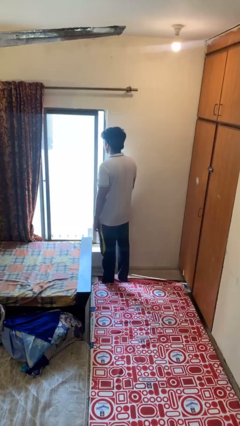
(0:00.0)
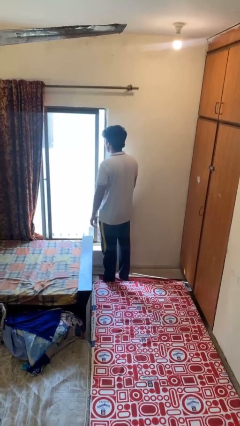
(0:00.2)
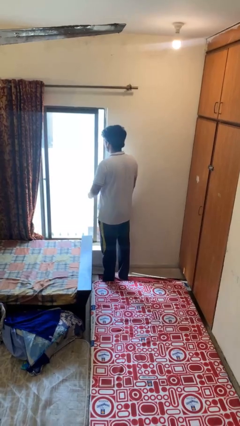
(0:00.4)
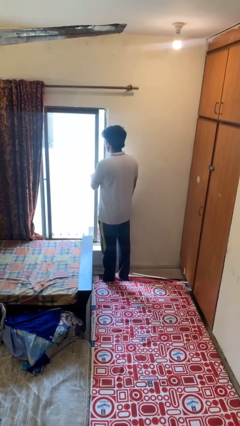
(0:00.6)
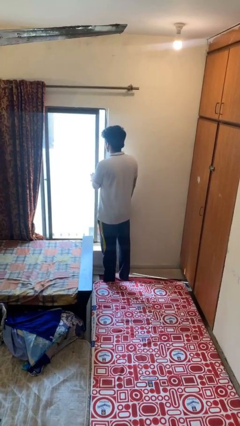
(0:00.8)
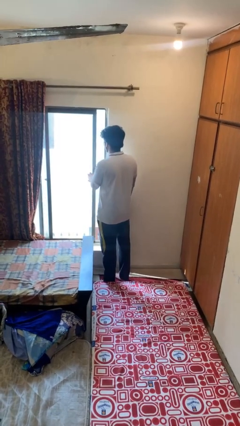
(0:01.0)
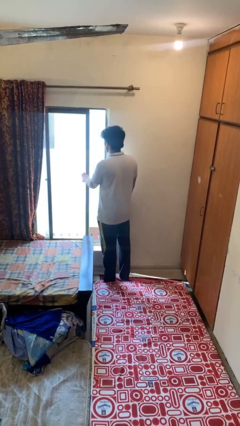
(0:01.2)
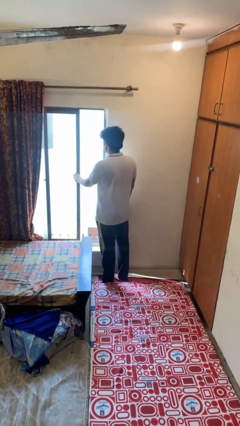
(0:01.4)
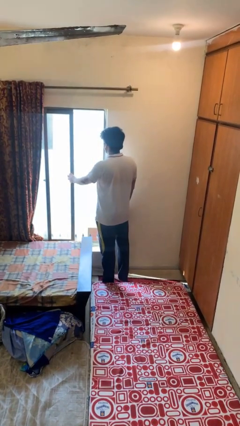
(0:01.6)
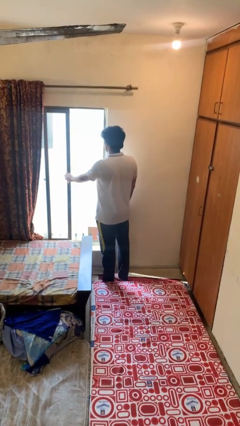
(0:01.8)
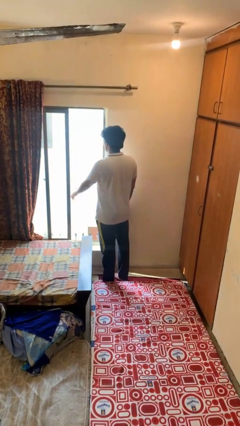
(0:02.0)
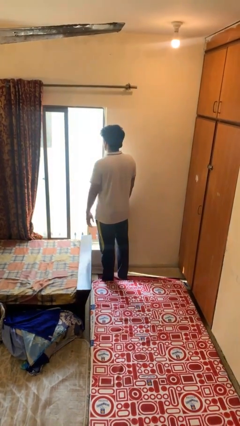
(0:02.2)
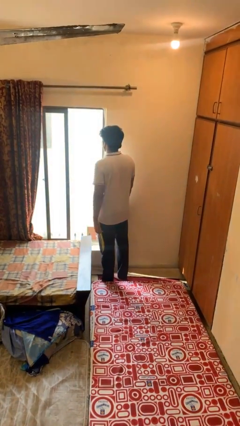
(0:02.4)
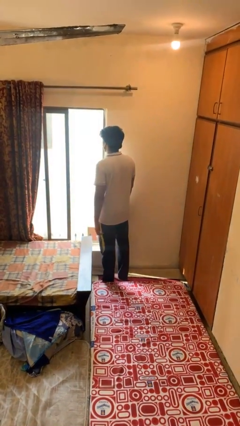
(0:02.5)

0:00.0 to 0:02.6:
person opens home window

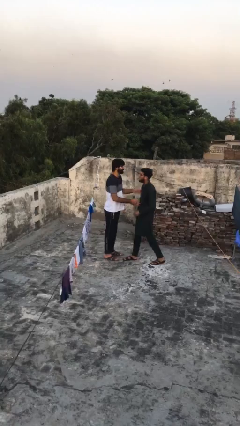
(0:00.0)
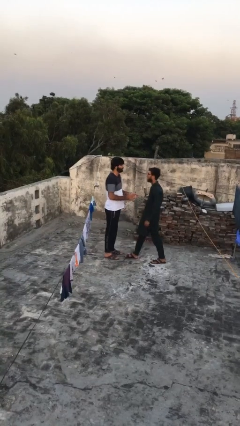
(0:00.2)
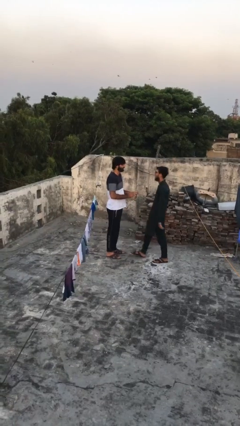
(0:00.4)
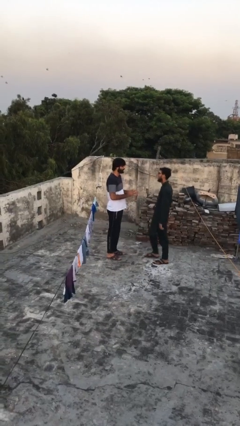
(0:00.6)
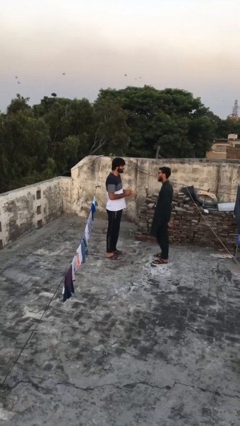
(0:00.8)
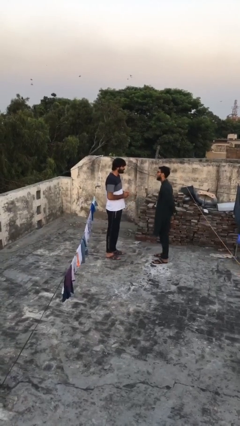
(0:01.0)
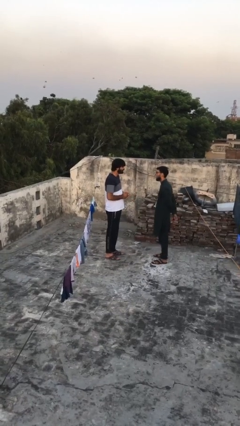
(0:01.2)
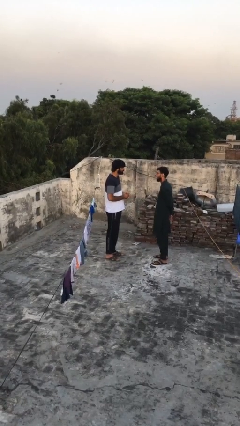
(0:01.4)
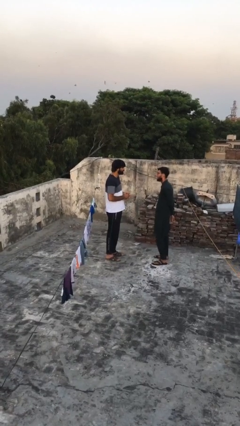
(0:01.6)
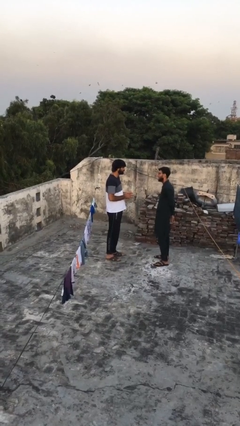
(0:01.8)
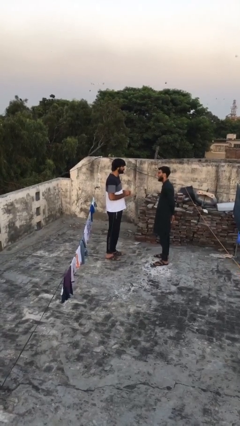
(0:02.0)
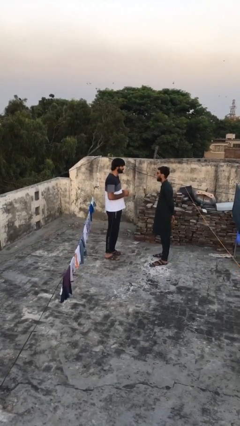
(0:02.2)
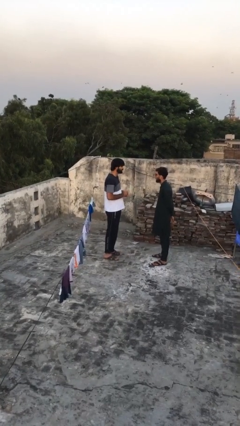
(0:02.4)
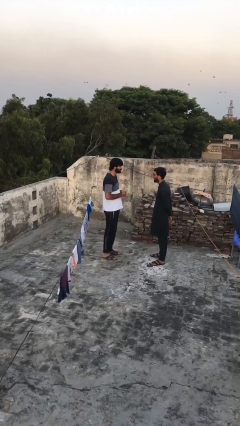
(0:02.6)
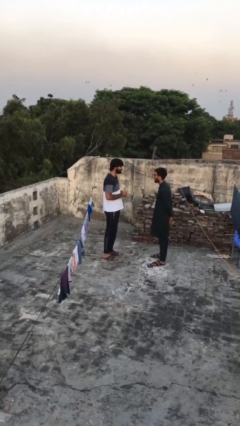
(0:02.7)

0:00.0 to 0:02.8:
person talks to person

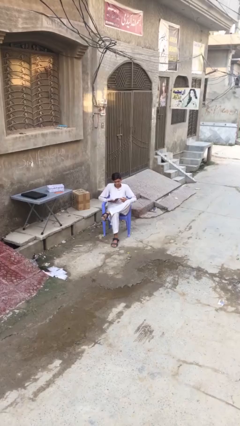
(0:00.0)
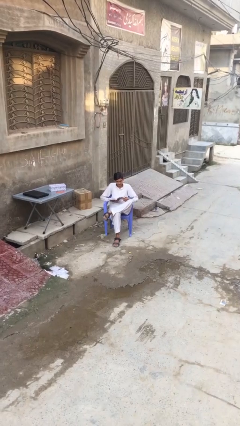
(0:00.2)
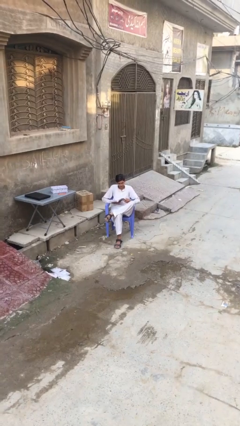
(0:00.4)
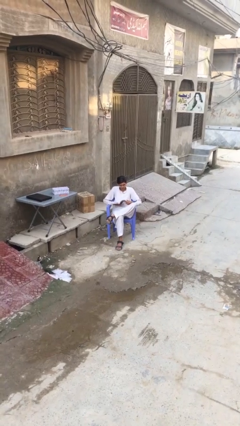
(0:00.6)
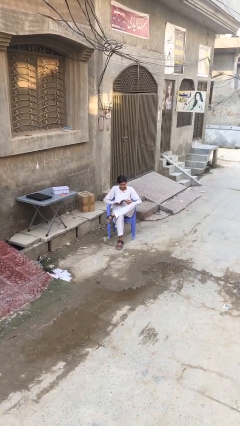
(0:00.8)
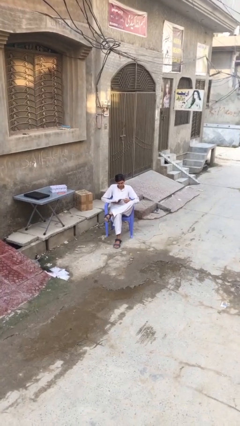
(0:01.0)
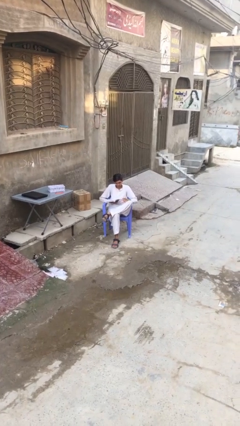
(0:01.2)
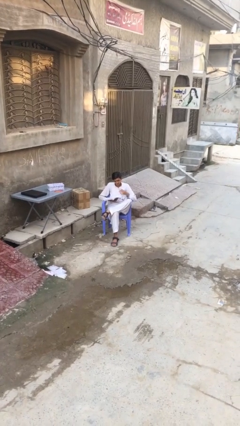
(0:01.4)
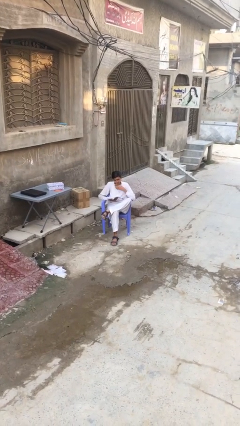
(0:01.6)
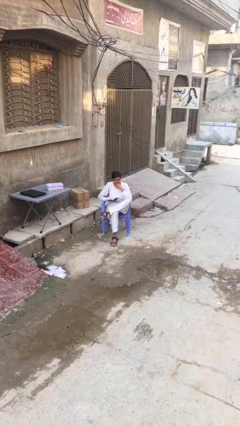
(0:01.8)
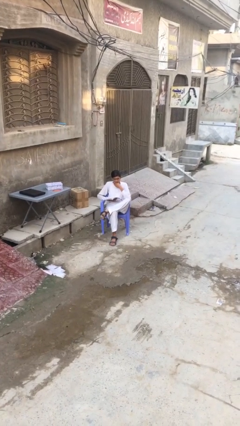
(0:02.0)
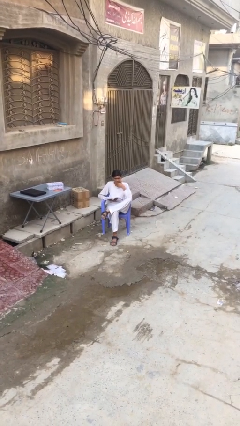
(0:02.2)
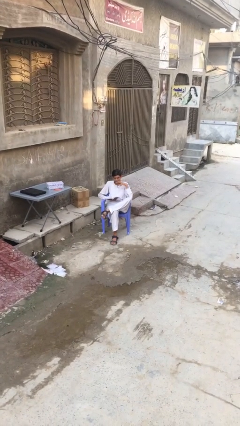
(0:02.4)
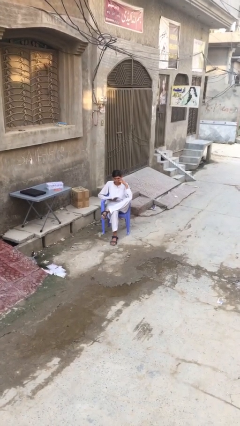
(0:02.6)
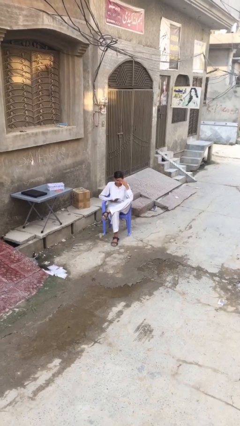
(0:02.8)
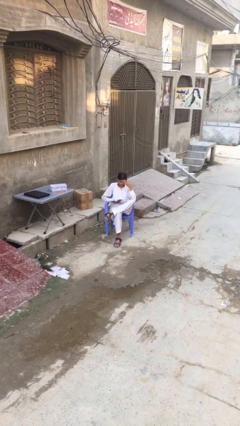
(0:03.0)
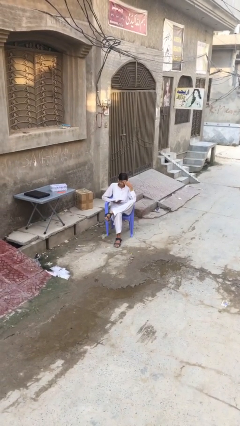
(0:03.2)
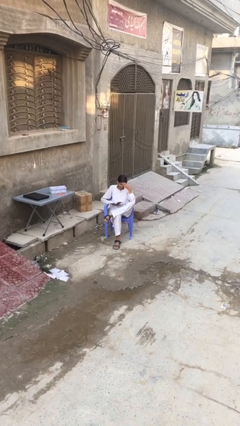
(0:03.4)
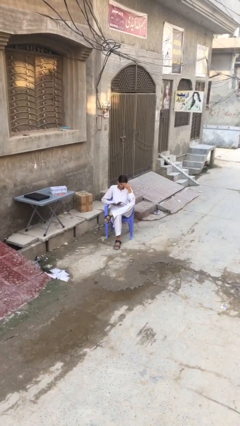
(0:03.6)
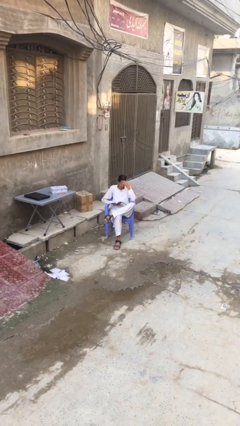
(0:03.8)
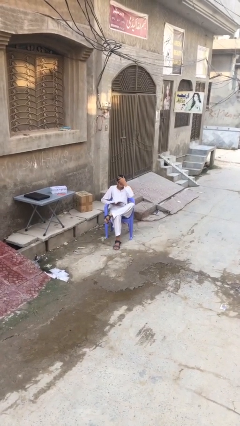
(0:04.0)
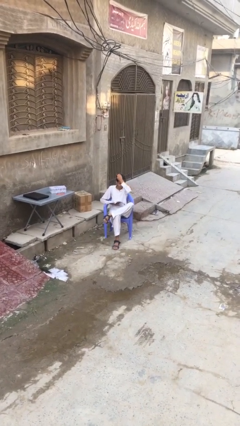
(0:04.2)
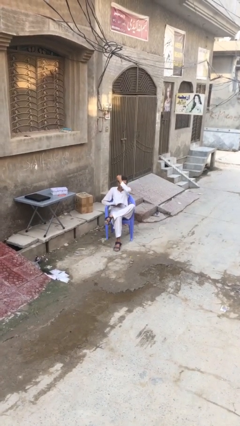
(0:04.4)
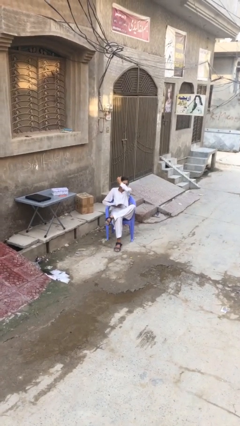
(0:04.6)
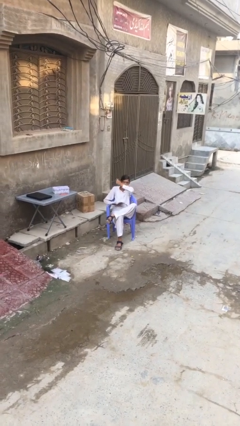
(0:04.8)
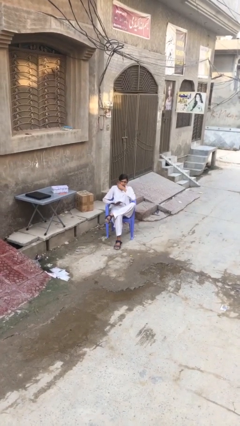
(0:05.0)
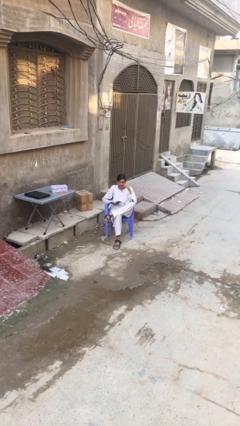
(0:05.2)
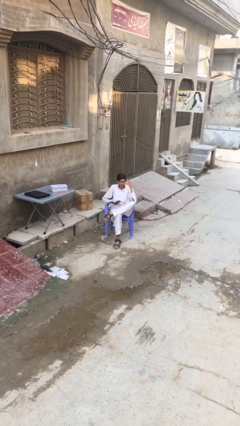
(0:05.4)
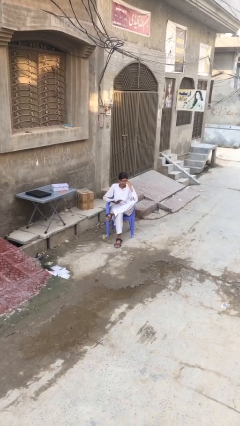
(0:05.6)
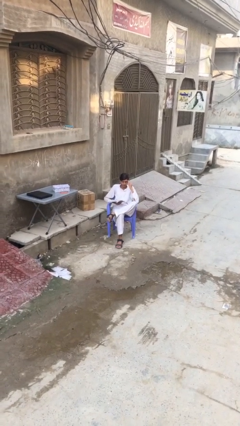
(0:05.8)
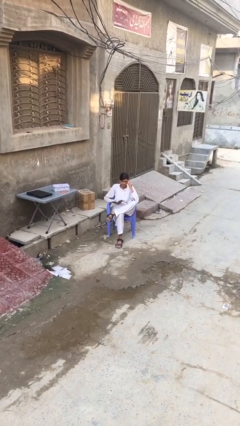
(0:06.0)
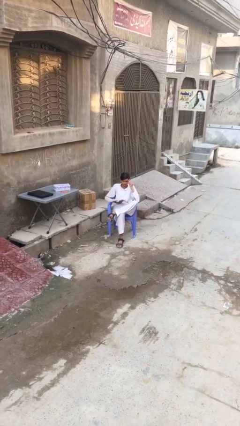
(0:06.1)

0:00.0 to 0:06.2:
person reads document

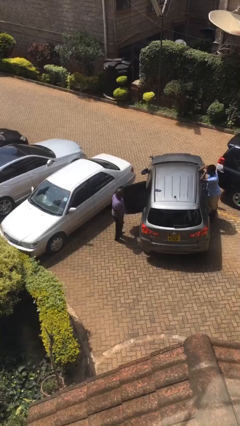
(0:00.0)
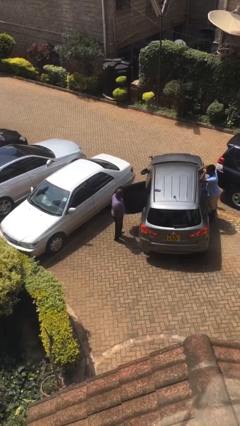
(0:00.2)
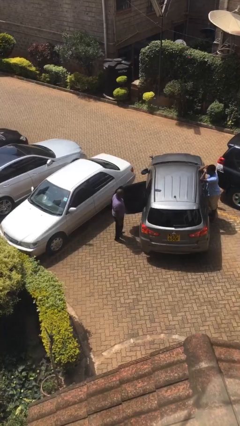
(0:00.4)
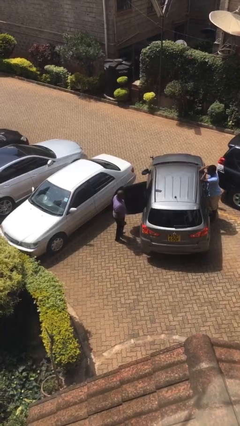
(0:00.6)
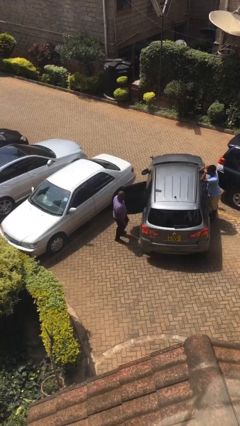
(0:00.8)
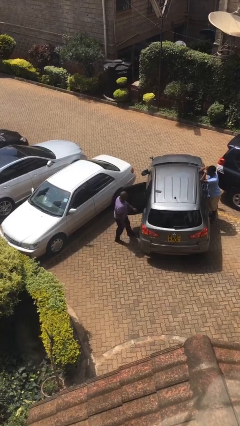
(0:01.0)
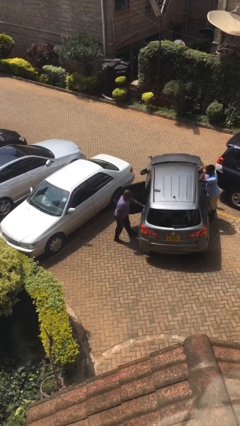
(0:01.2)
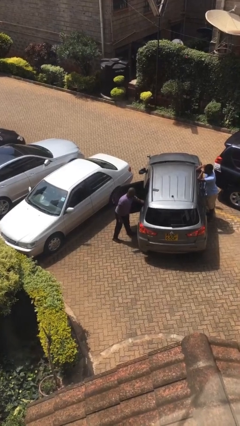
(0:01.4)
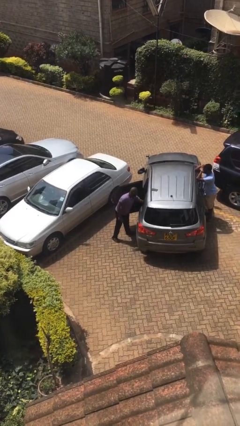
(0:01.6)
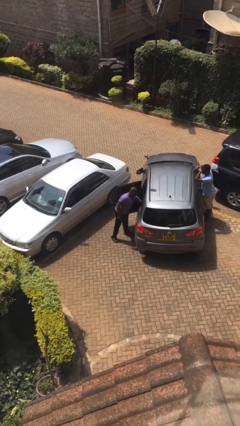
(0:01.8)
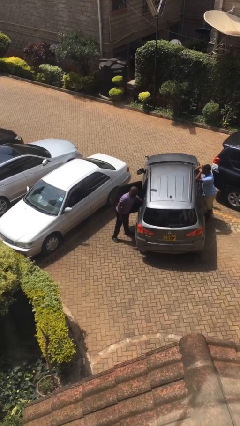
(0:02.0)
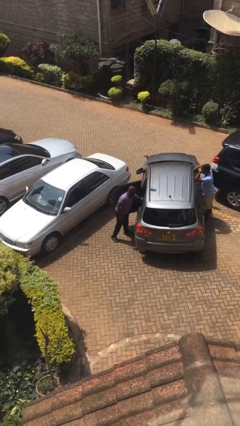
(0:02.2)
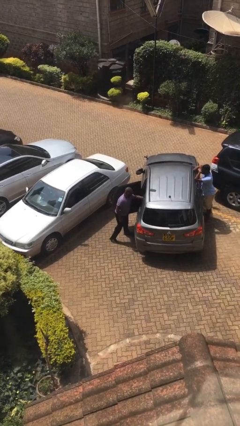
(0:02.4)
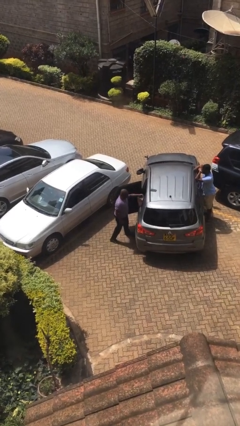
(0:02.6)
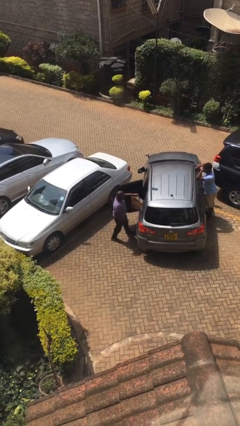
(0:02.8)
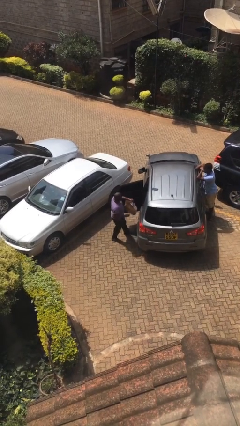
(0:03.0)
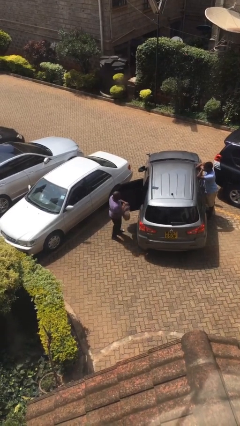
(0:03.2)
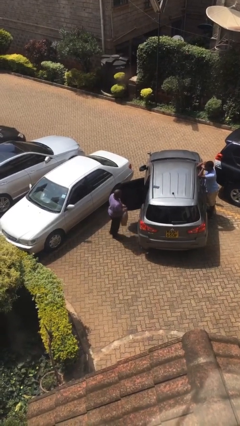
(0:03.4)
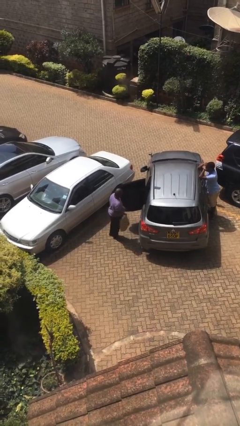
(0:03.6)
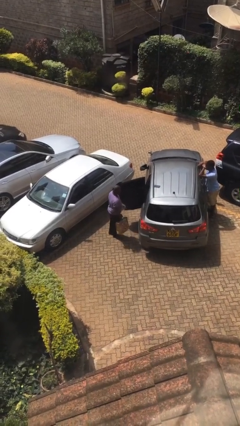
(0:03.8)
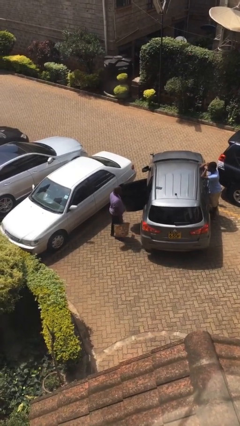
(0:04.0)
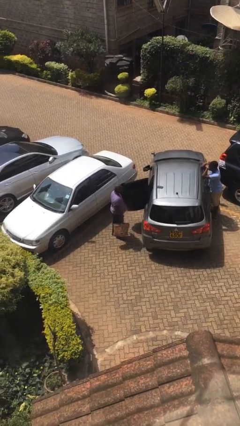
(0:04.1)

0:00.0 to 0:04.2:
person unloads car

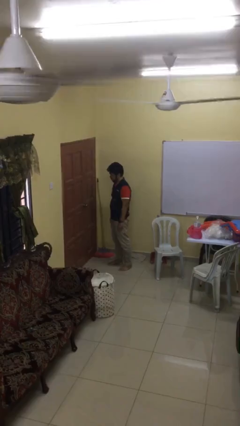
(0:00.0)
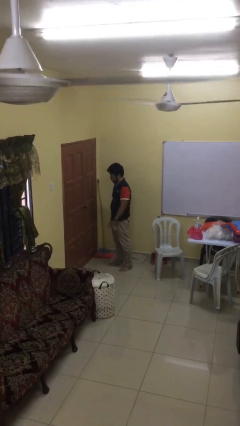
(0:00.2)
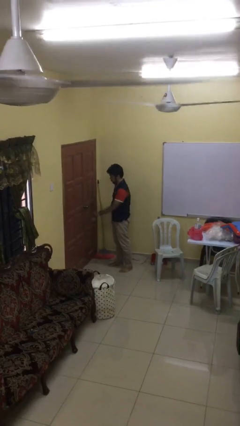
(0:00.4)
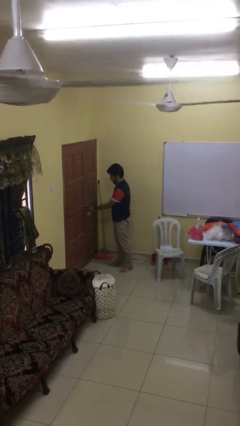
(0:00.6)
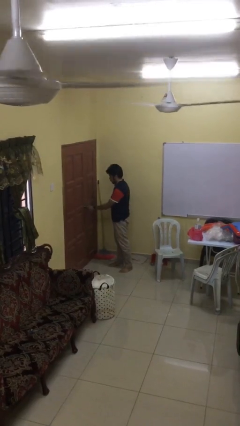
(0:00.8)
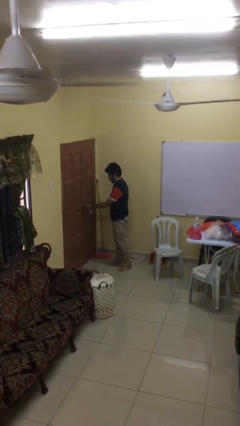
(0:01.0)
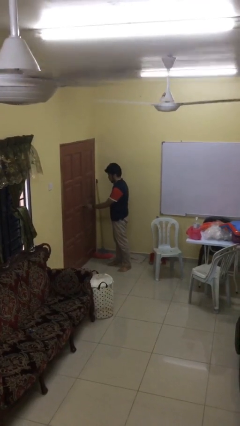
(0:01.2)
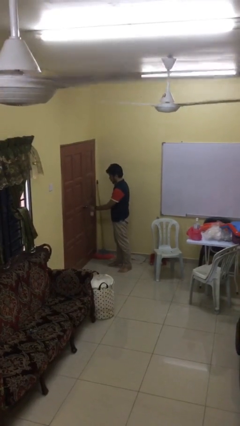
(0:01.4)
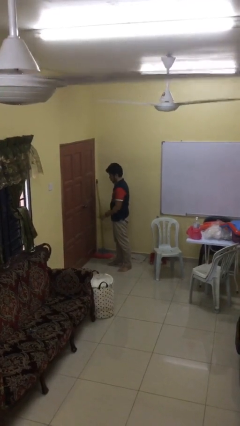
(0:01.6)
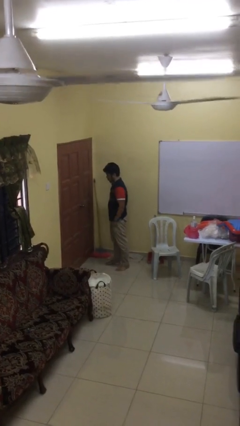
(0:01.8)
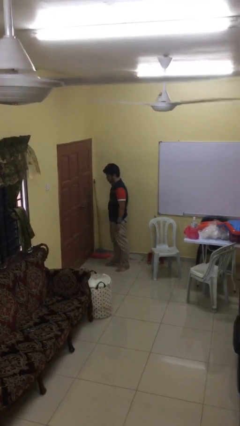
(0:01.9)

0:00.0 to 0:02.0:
person locks door with keys
